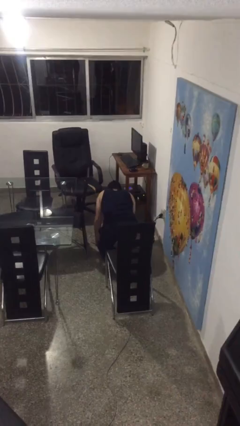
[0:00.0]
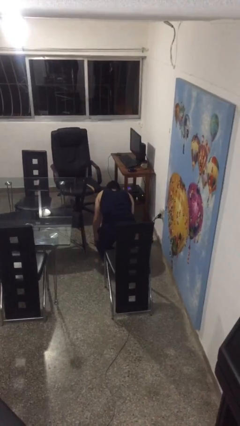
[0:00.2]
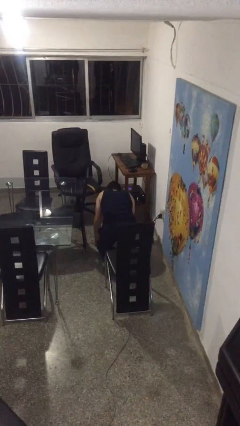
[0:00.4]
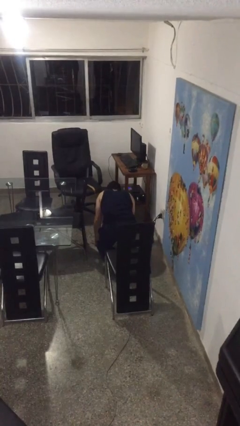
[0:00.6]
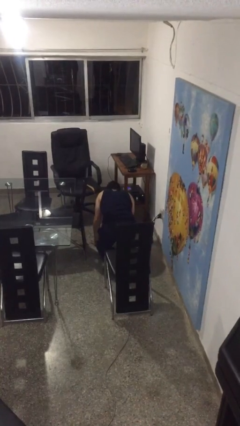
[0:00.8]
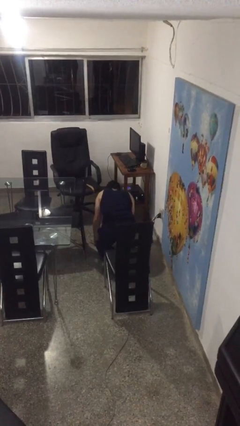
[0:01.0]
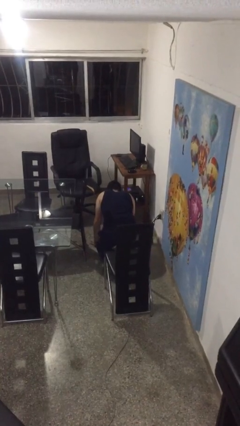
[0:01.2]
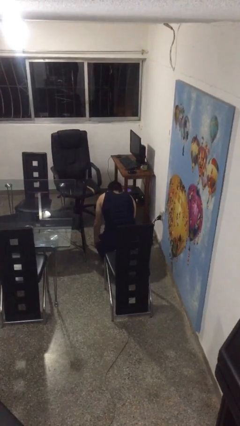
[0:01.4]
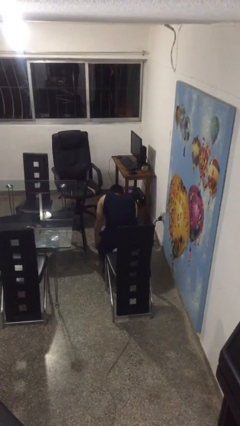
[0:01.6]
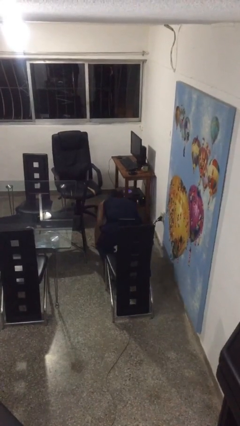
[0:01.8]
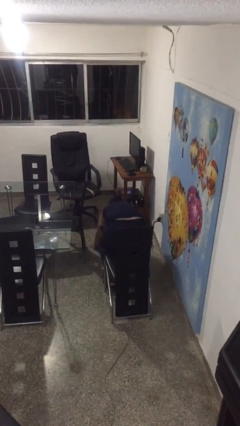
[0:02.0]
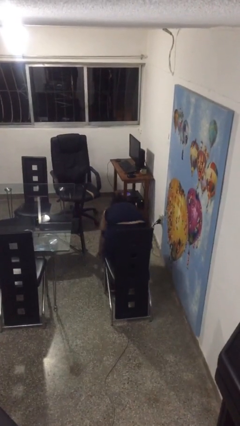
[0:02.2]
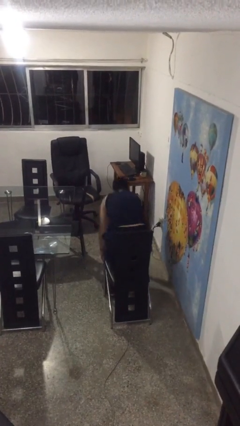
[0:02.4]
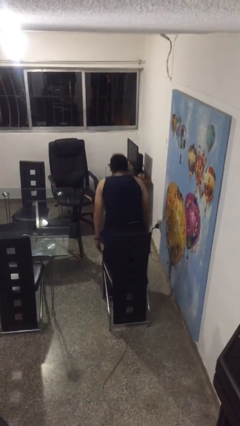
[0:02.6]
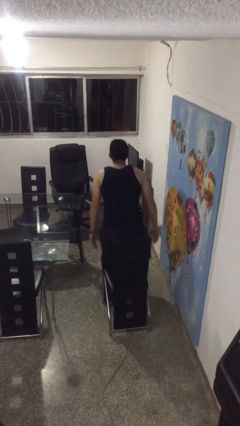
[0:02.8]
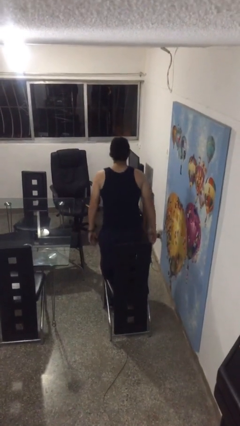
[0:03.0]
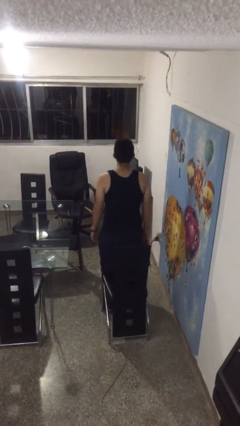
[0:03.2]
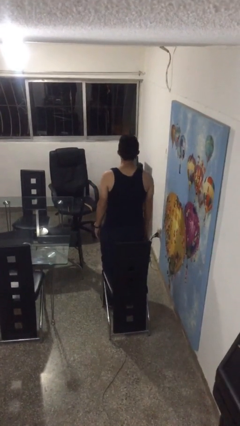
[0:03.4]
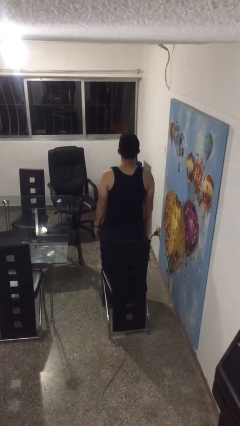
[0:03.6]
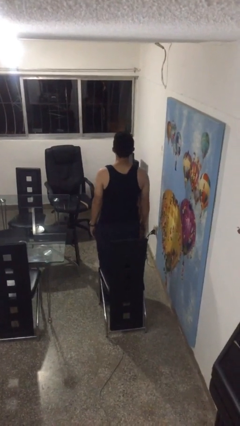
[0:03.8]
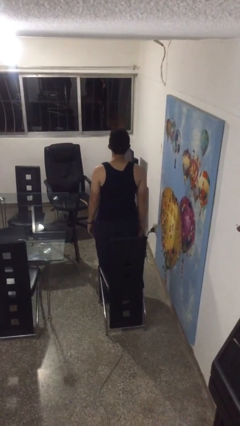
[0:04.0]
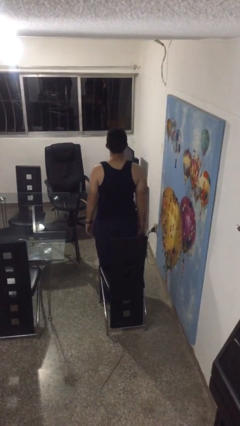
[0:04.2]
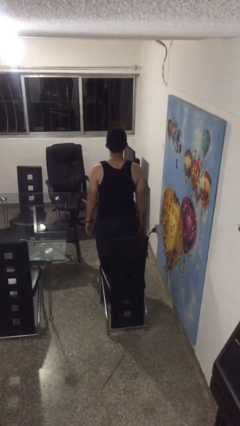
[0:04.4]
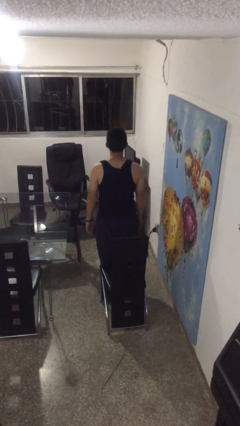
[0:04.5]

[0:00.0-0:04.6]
person stands up from floor

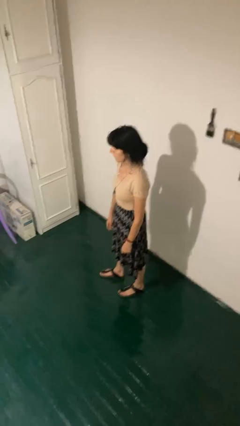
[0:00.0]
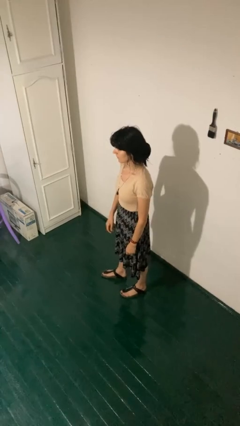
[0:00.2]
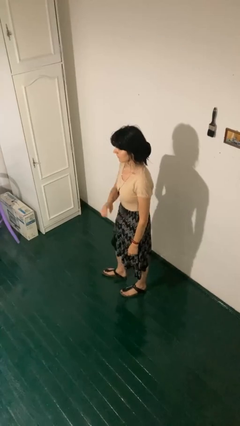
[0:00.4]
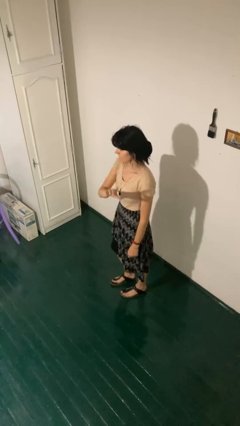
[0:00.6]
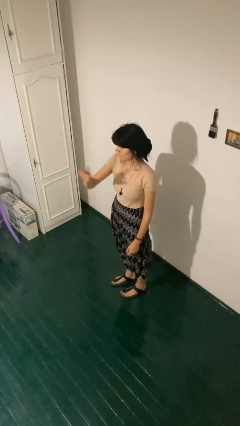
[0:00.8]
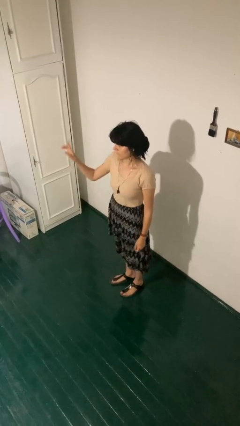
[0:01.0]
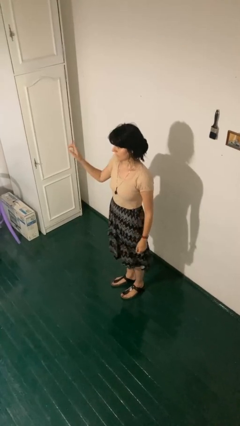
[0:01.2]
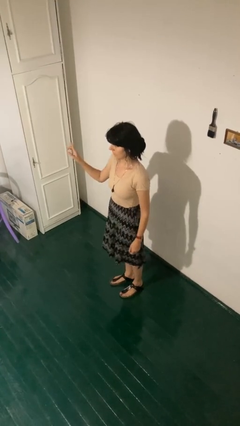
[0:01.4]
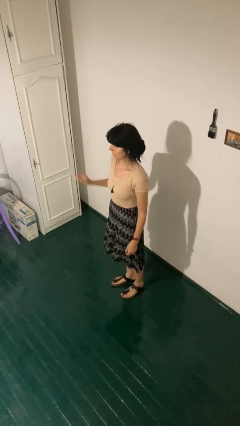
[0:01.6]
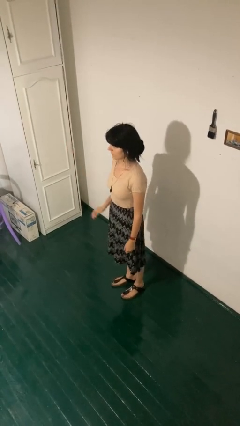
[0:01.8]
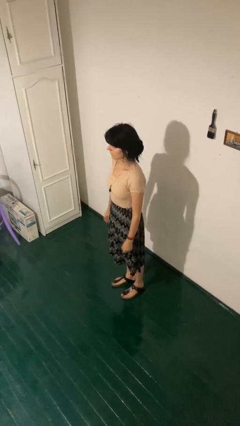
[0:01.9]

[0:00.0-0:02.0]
person gestures swipe right

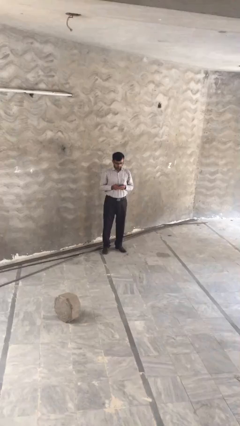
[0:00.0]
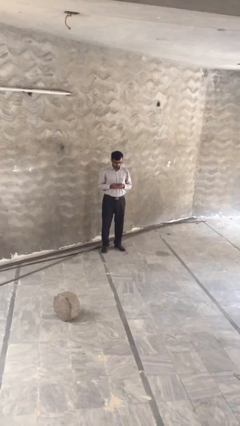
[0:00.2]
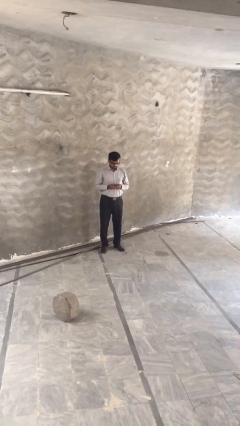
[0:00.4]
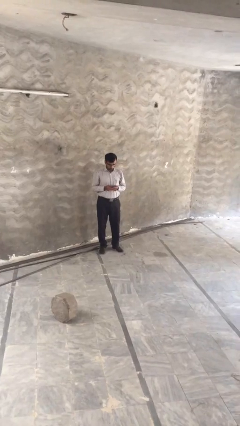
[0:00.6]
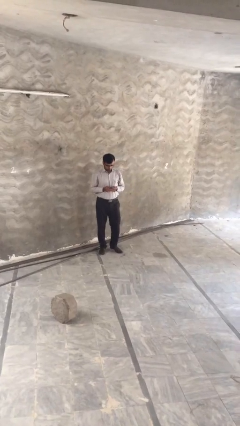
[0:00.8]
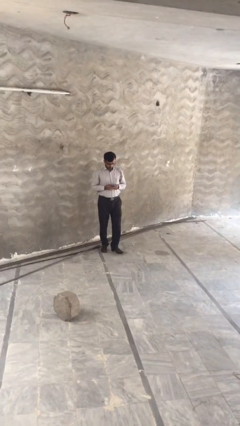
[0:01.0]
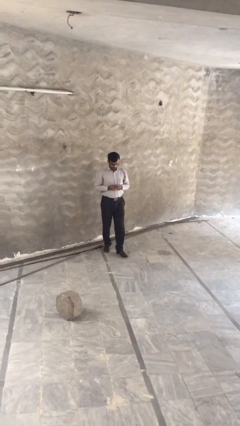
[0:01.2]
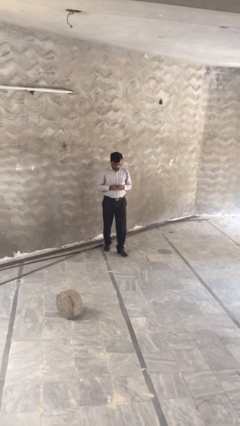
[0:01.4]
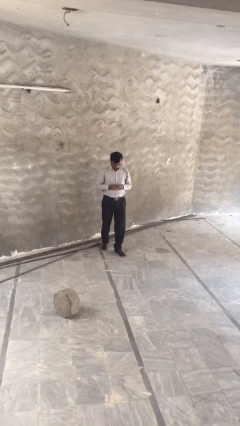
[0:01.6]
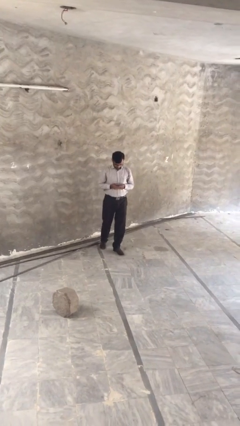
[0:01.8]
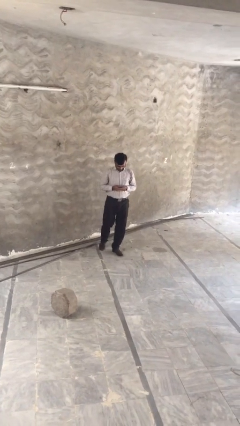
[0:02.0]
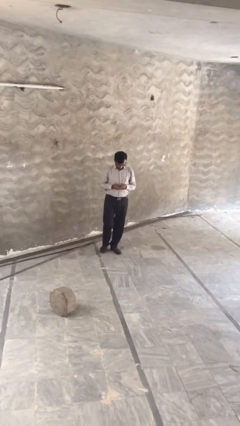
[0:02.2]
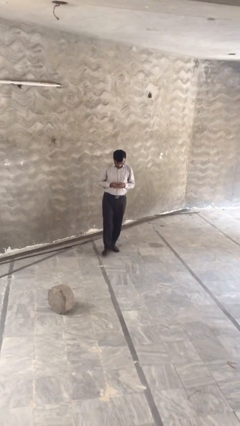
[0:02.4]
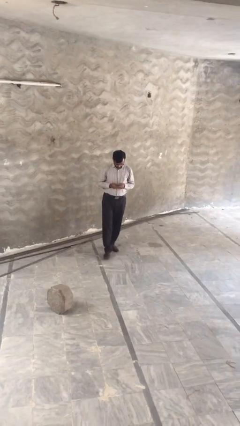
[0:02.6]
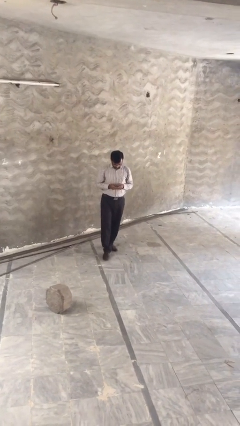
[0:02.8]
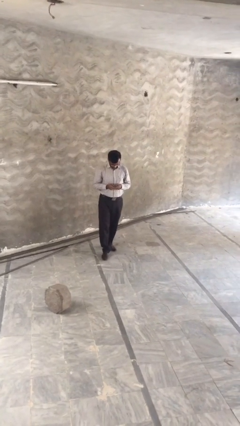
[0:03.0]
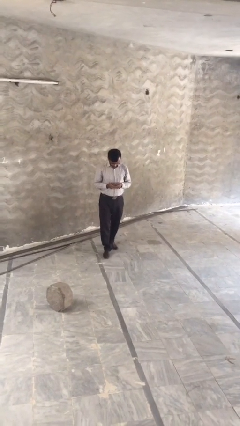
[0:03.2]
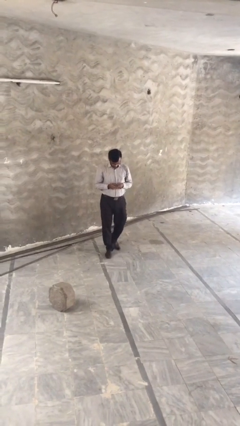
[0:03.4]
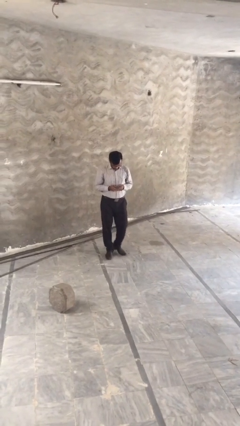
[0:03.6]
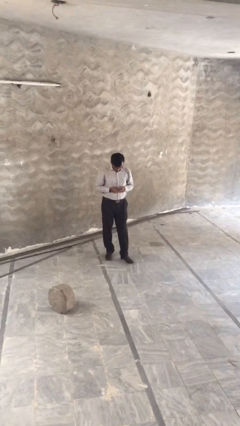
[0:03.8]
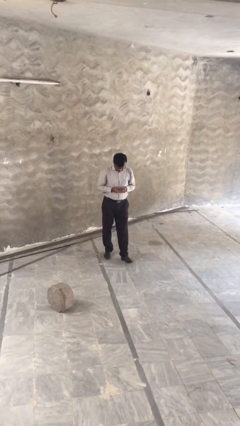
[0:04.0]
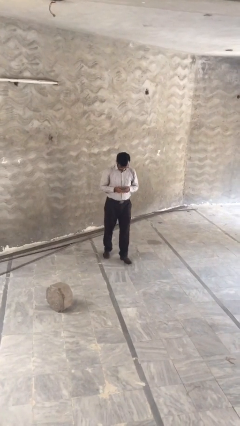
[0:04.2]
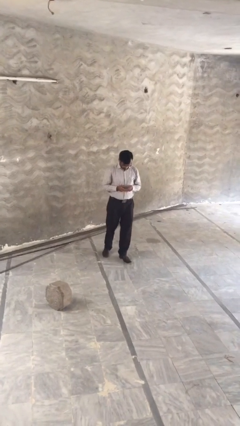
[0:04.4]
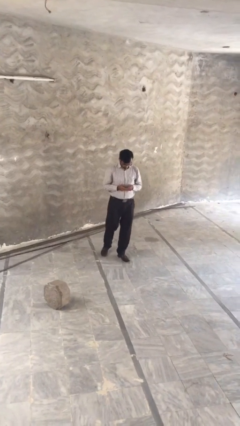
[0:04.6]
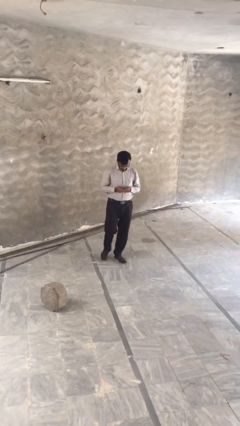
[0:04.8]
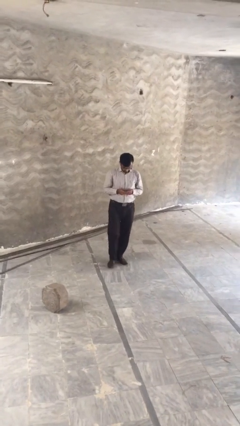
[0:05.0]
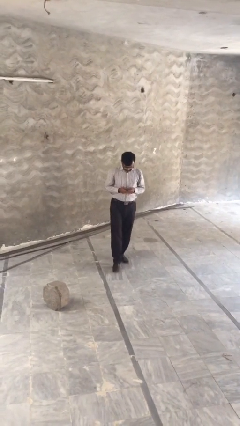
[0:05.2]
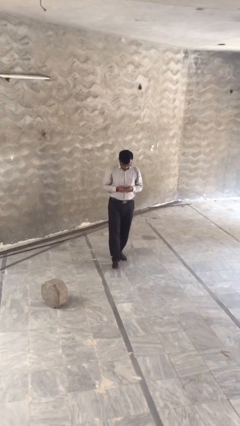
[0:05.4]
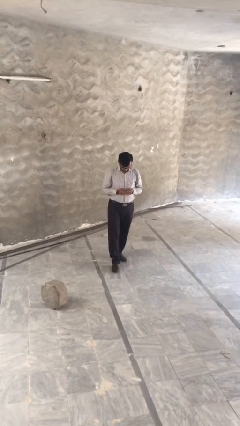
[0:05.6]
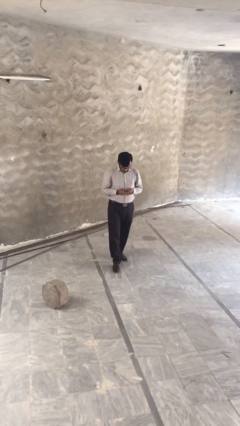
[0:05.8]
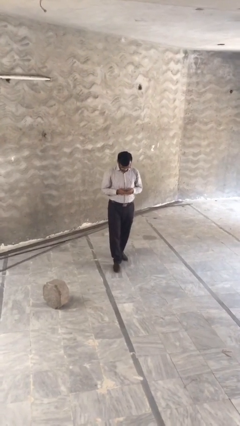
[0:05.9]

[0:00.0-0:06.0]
person texts on phone

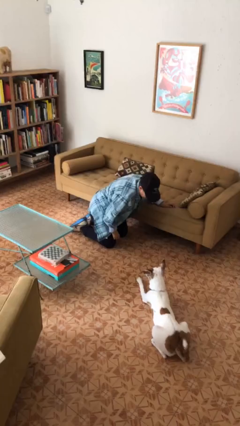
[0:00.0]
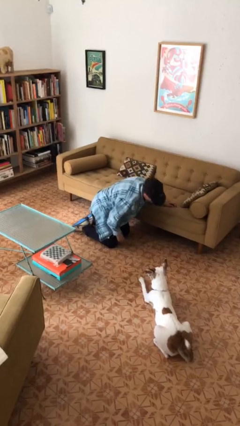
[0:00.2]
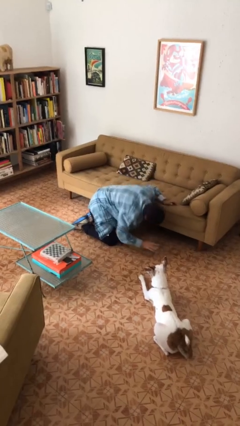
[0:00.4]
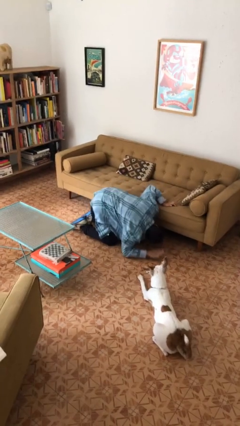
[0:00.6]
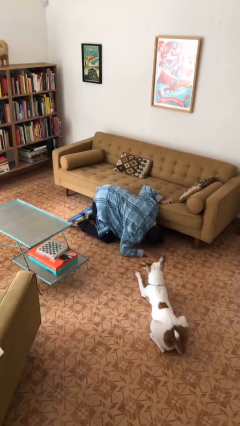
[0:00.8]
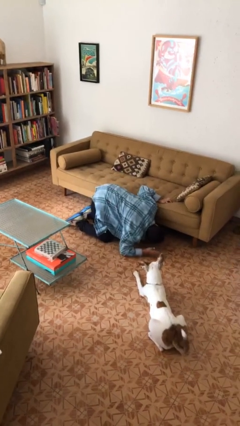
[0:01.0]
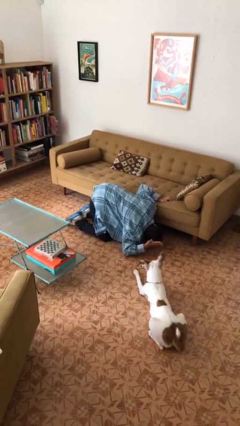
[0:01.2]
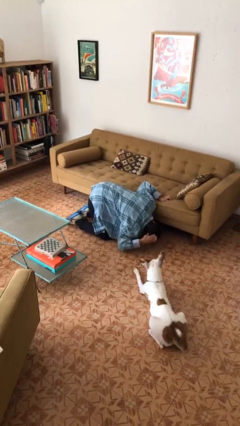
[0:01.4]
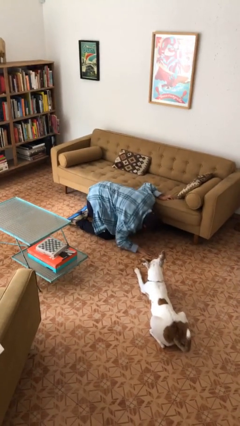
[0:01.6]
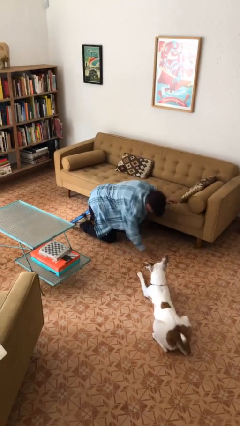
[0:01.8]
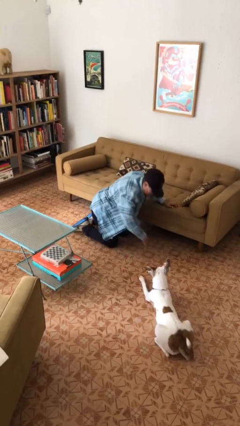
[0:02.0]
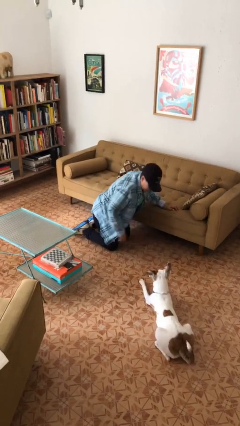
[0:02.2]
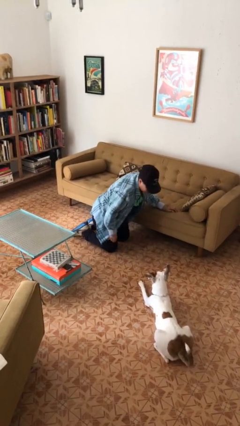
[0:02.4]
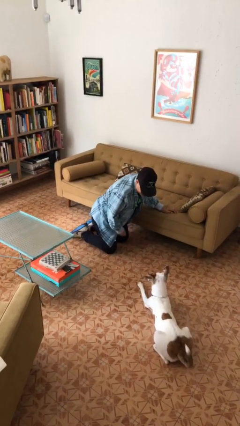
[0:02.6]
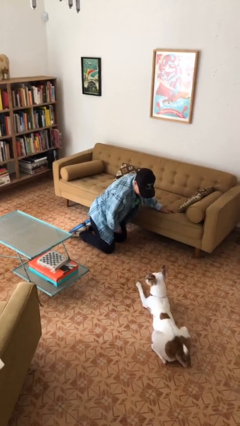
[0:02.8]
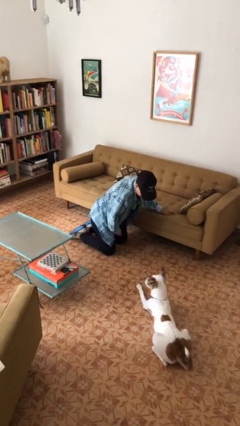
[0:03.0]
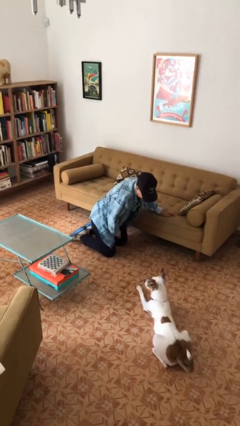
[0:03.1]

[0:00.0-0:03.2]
person searches under couch

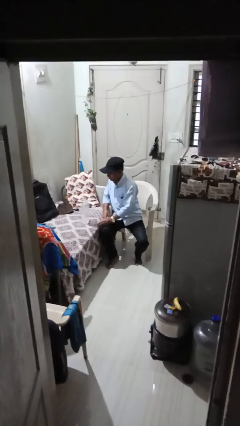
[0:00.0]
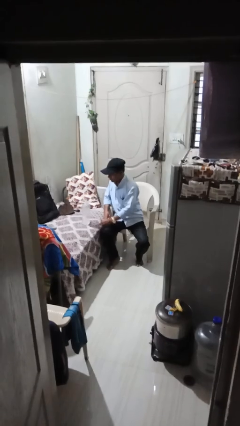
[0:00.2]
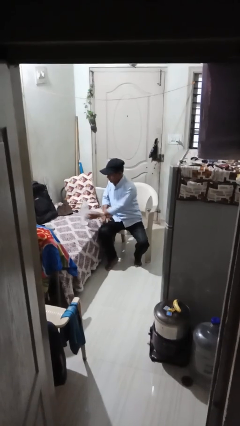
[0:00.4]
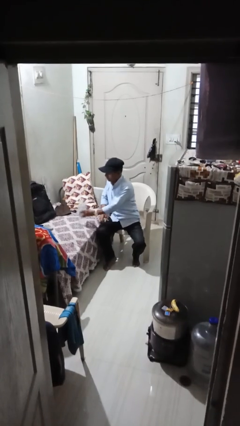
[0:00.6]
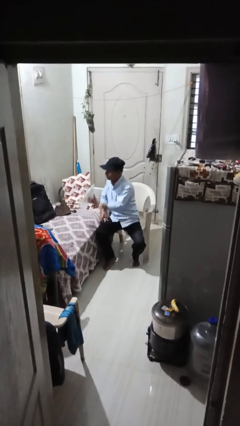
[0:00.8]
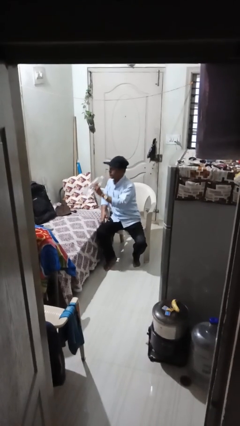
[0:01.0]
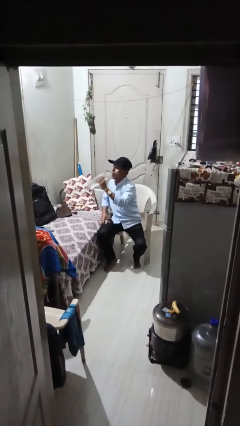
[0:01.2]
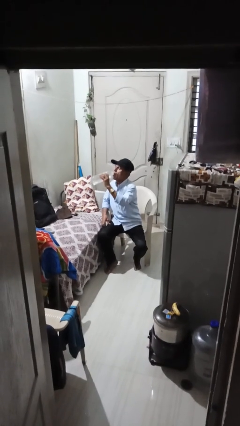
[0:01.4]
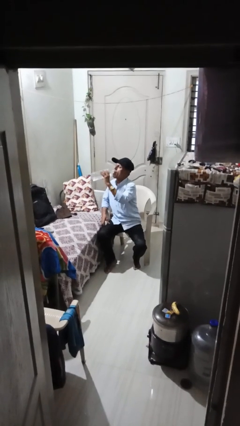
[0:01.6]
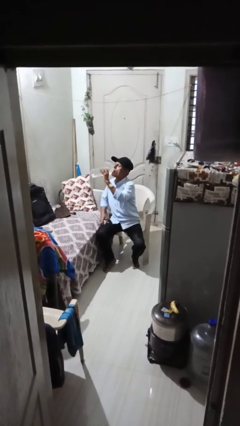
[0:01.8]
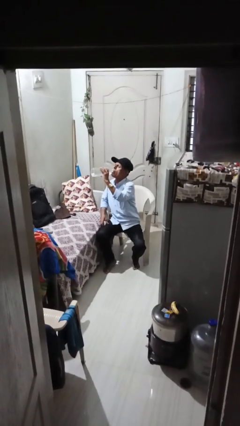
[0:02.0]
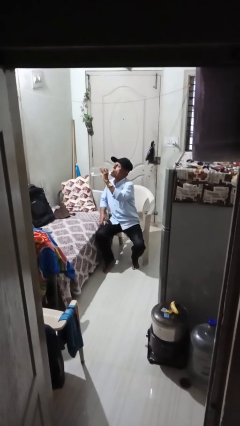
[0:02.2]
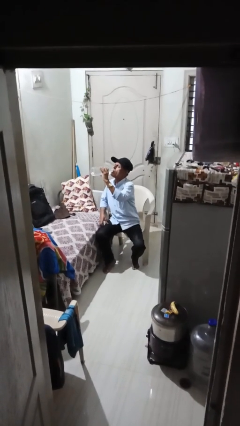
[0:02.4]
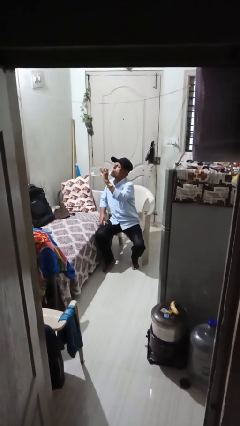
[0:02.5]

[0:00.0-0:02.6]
person drinks from bottle
